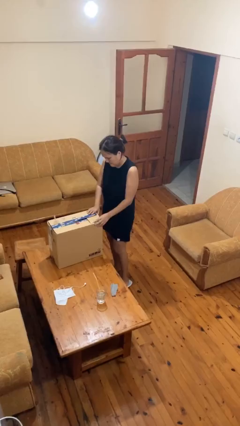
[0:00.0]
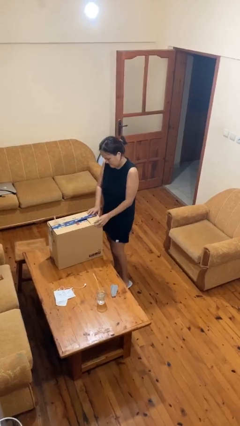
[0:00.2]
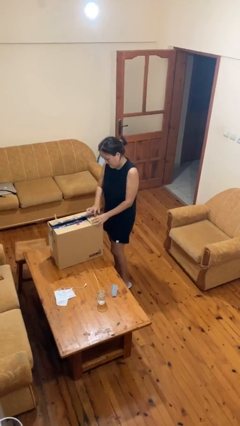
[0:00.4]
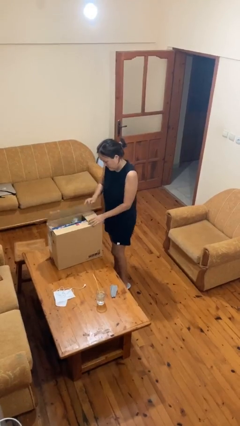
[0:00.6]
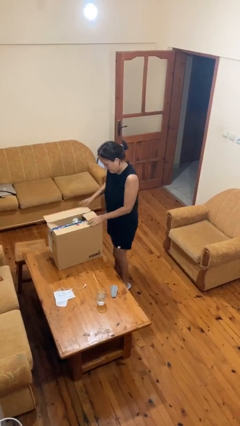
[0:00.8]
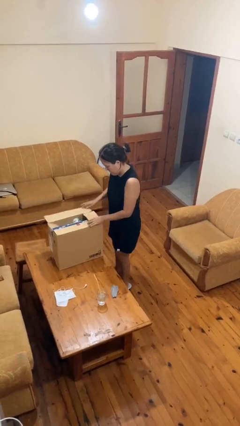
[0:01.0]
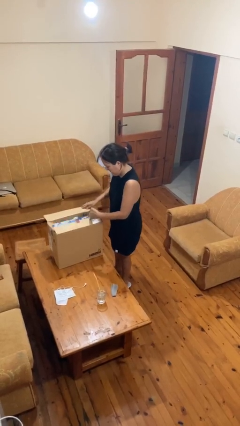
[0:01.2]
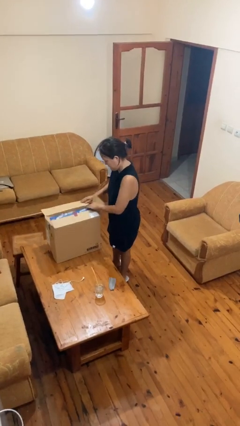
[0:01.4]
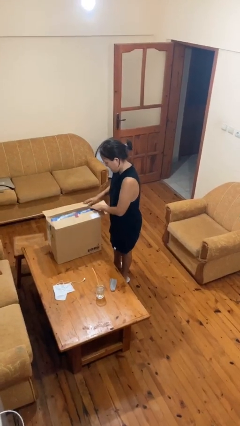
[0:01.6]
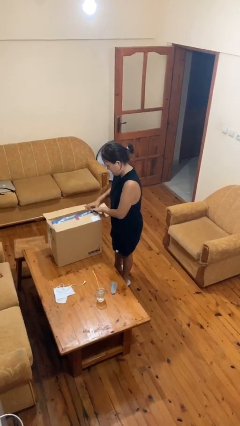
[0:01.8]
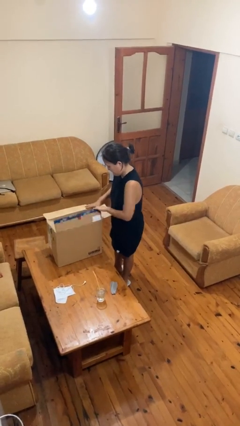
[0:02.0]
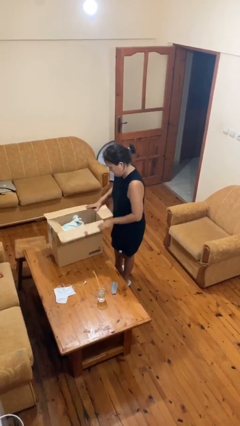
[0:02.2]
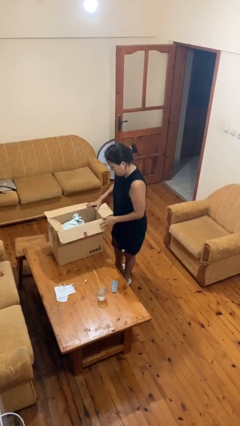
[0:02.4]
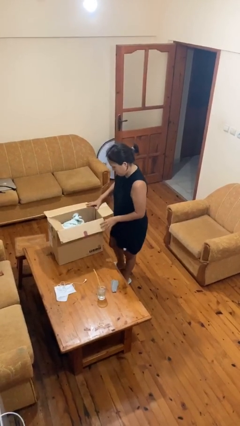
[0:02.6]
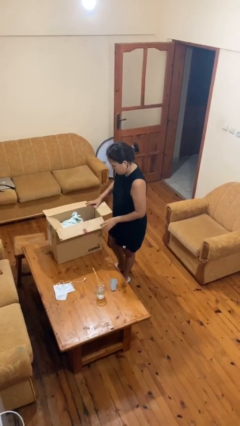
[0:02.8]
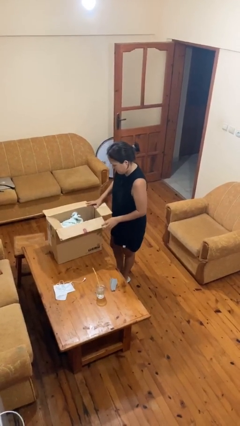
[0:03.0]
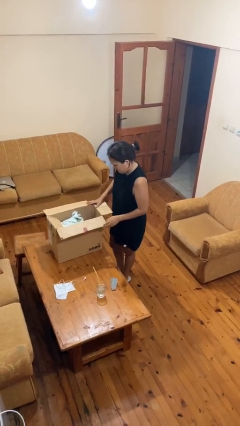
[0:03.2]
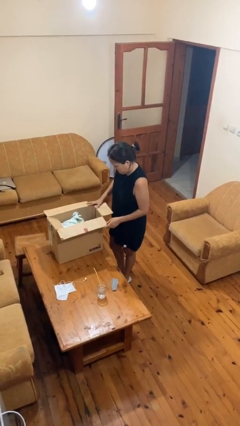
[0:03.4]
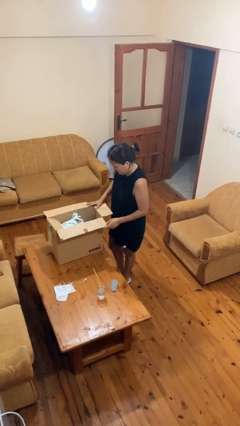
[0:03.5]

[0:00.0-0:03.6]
person opens box

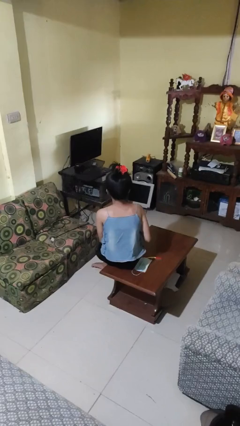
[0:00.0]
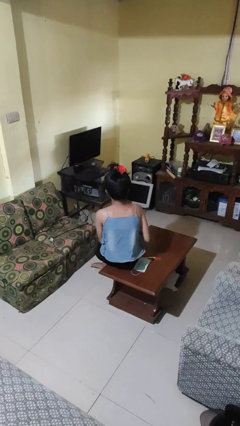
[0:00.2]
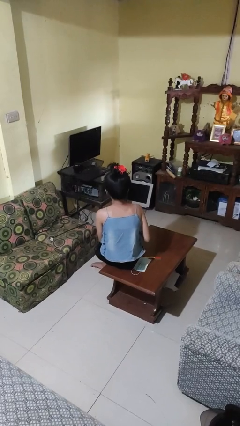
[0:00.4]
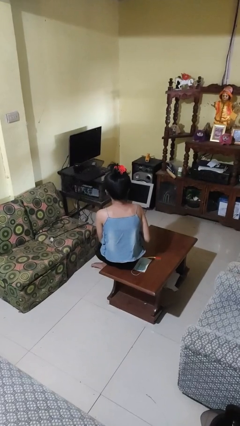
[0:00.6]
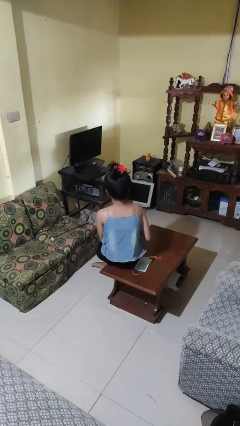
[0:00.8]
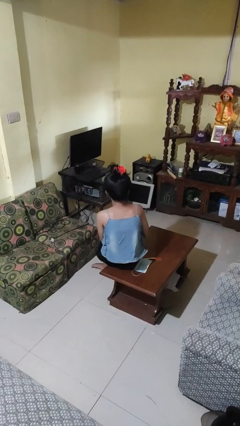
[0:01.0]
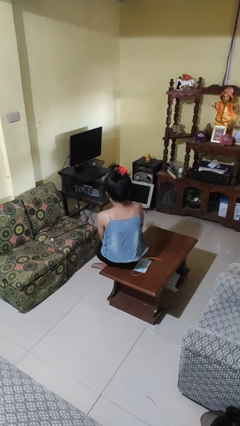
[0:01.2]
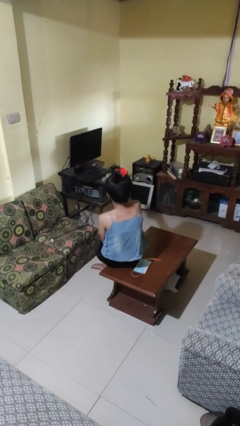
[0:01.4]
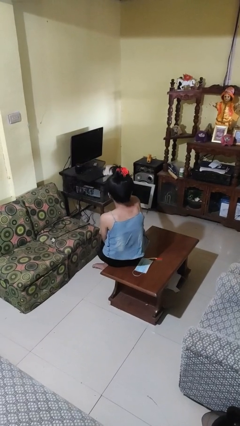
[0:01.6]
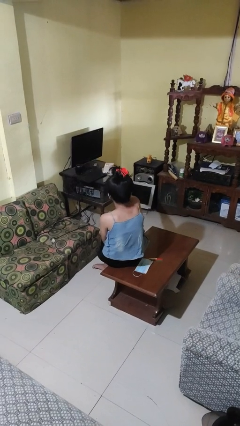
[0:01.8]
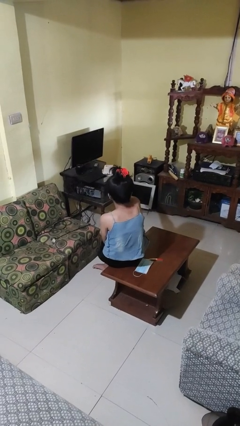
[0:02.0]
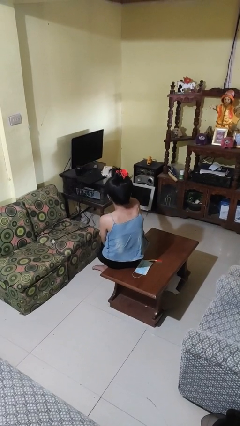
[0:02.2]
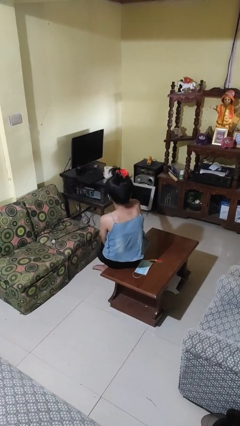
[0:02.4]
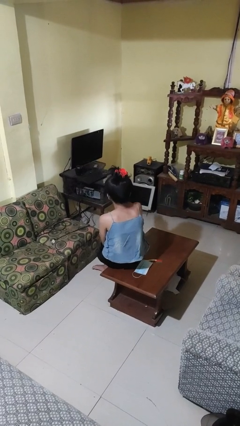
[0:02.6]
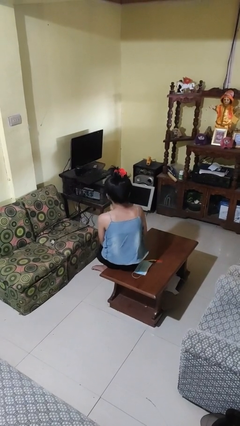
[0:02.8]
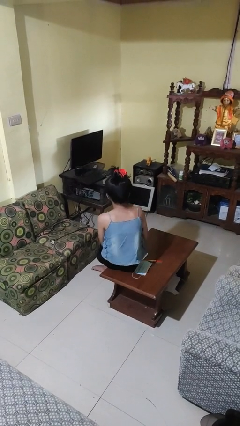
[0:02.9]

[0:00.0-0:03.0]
person uses television remote

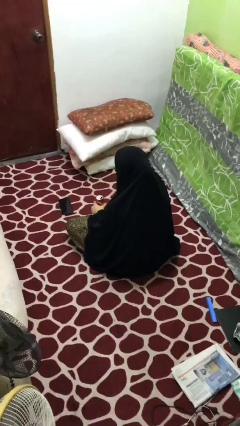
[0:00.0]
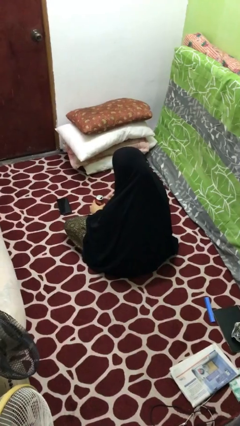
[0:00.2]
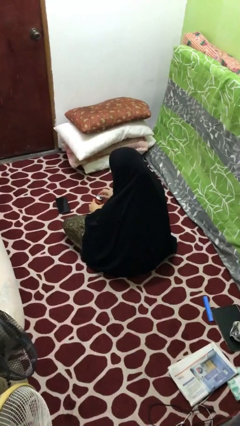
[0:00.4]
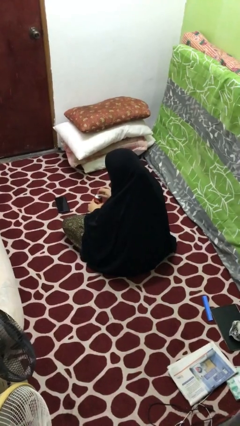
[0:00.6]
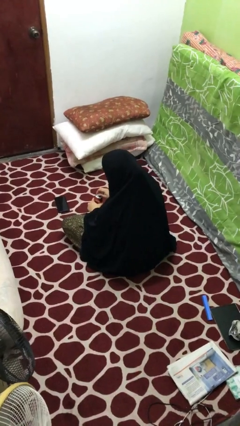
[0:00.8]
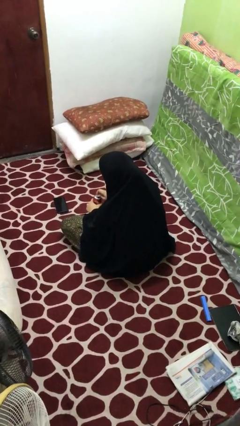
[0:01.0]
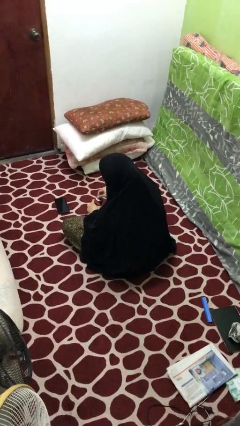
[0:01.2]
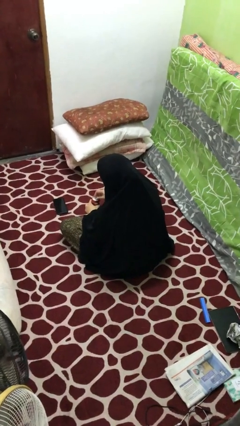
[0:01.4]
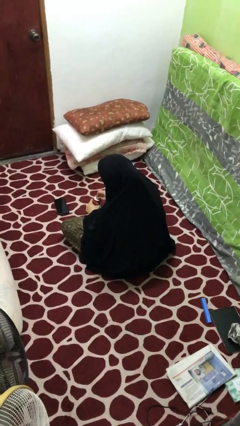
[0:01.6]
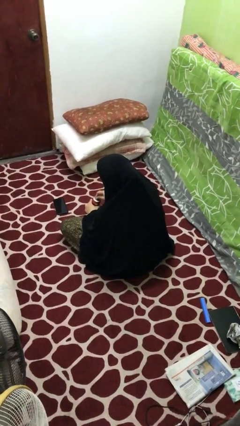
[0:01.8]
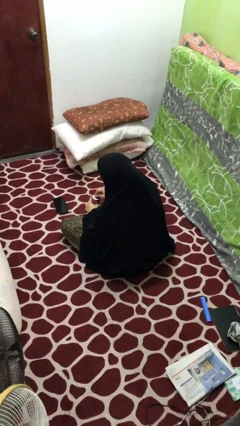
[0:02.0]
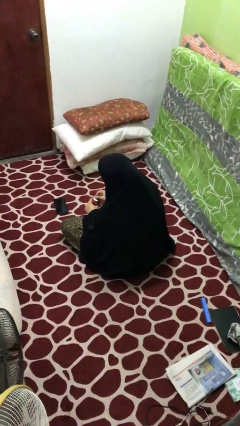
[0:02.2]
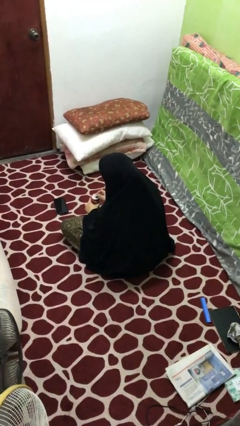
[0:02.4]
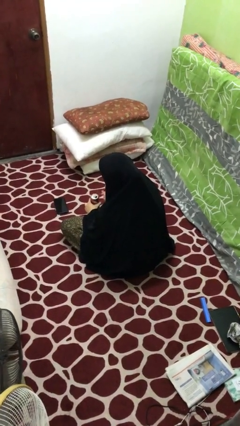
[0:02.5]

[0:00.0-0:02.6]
person opens beverage can

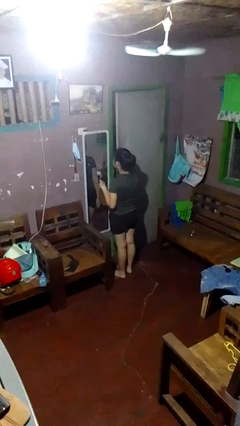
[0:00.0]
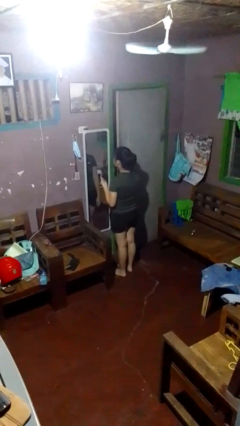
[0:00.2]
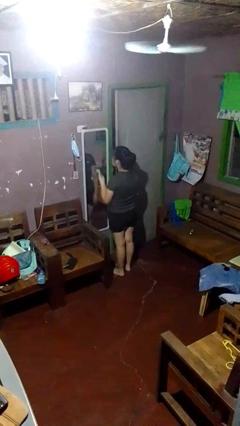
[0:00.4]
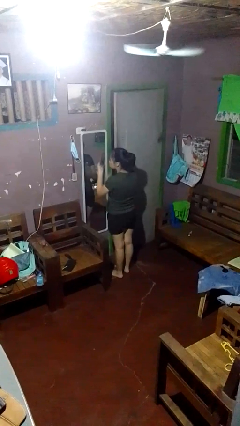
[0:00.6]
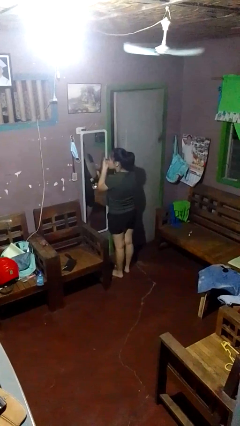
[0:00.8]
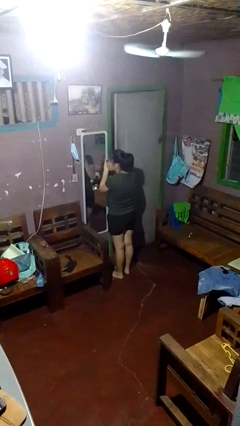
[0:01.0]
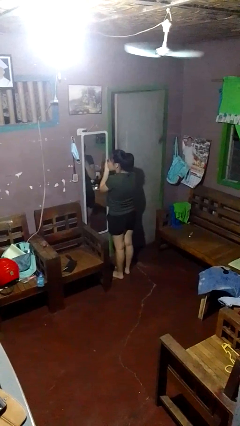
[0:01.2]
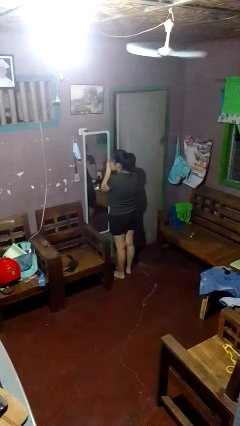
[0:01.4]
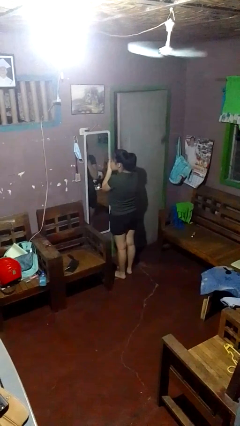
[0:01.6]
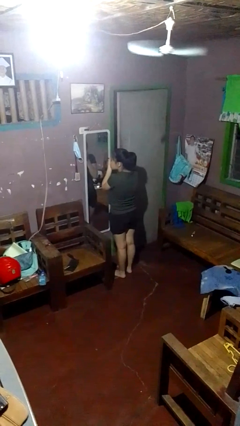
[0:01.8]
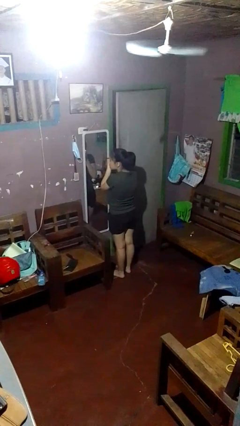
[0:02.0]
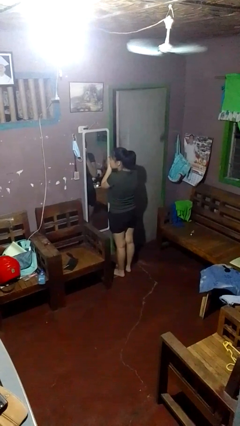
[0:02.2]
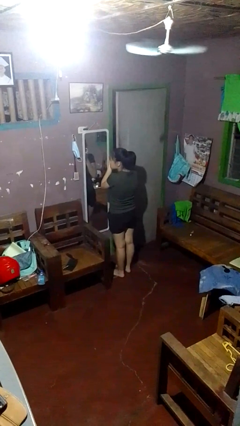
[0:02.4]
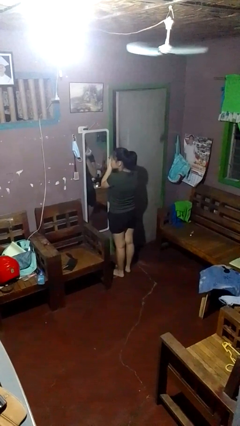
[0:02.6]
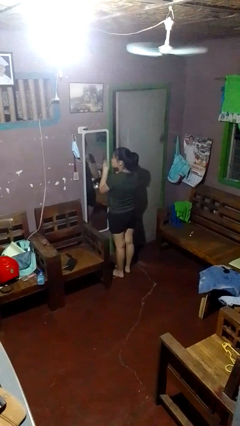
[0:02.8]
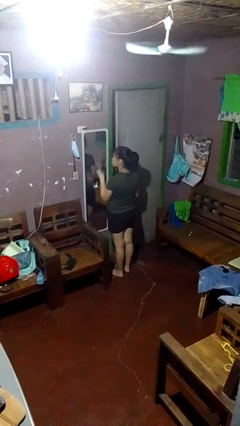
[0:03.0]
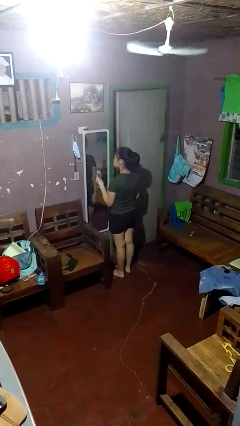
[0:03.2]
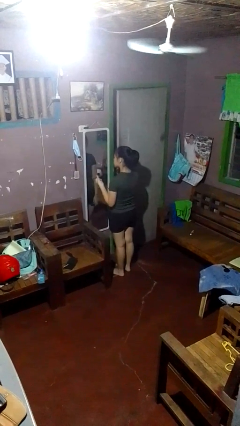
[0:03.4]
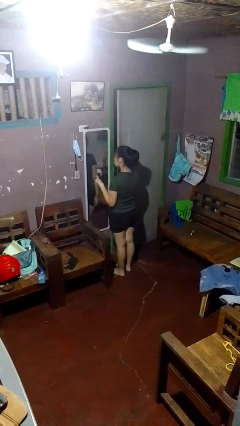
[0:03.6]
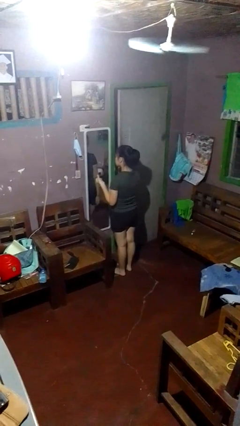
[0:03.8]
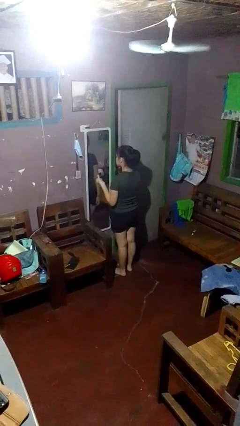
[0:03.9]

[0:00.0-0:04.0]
person applies eye makeup

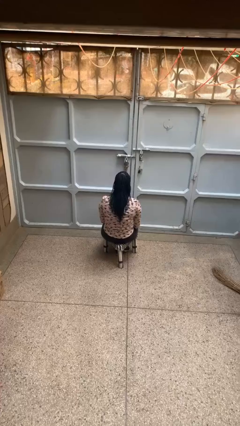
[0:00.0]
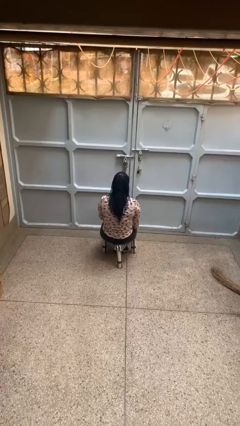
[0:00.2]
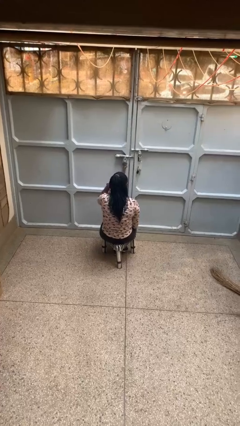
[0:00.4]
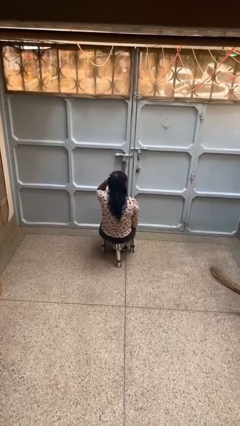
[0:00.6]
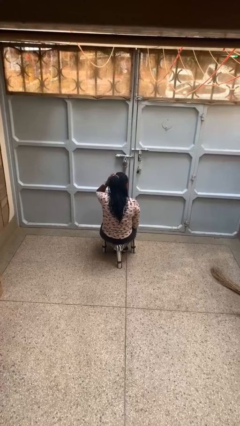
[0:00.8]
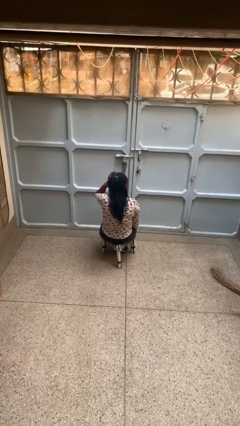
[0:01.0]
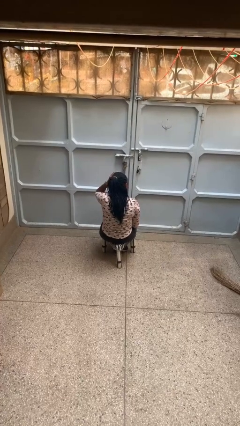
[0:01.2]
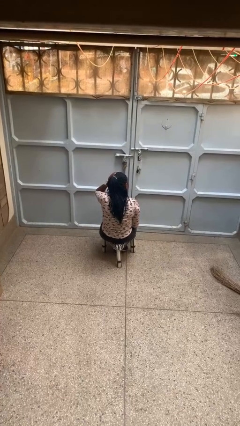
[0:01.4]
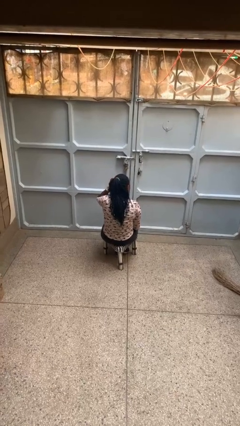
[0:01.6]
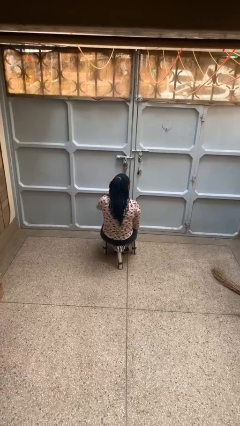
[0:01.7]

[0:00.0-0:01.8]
person strokes hair

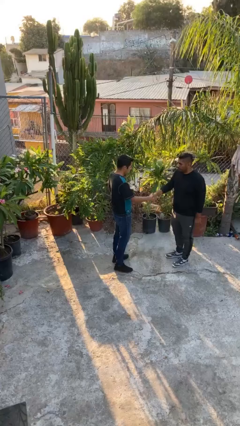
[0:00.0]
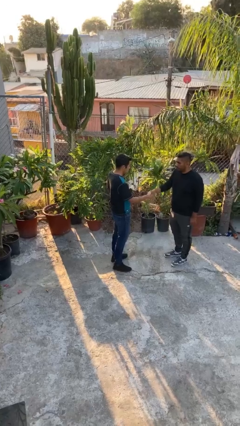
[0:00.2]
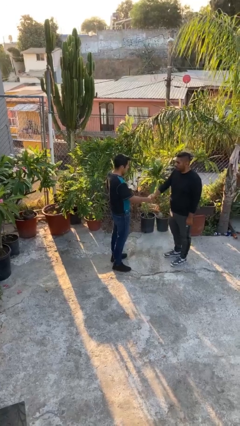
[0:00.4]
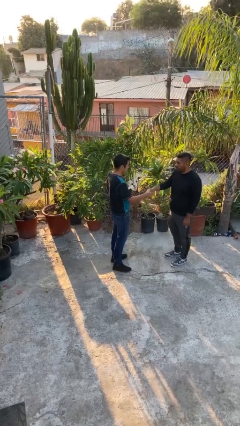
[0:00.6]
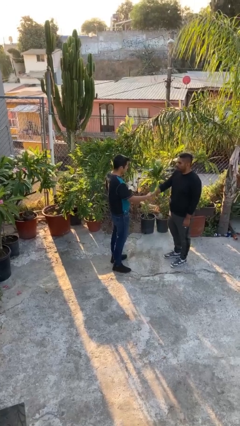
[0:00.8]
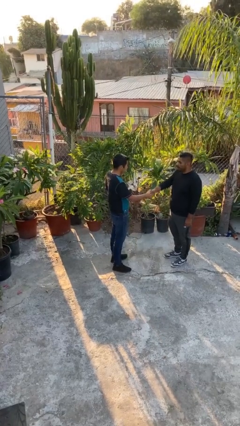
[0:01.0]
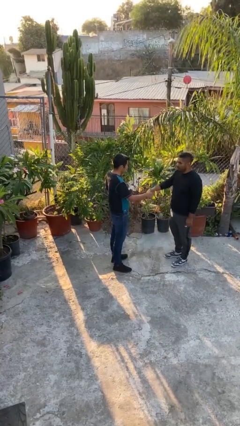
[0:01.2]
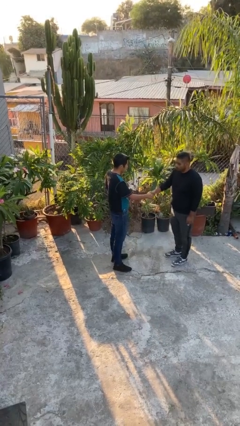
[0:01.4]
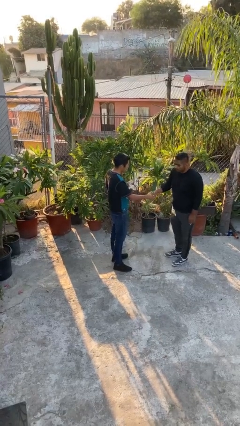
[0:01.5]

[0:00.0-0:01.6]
person shakes hand

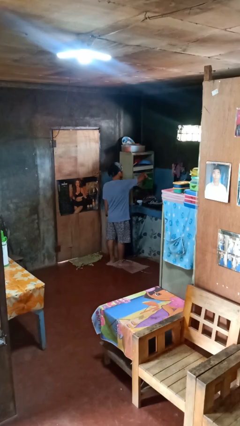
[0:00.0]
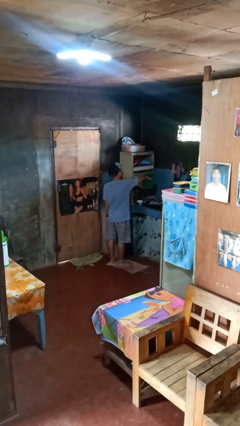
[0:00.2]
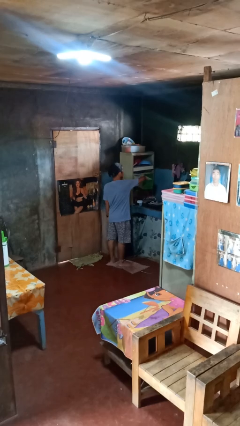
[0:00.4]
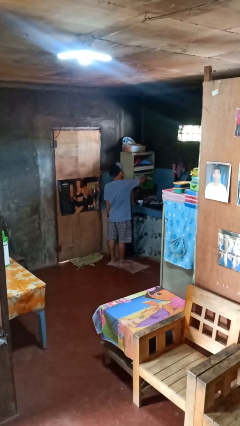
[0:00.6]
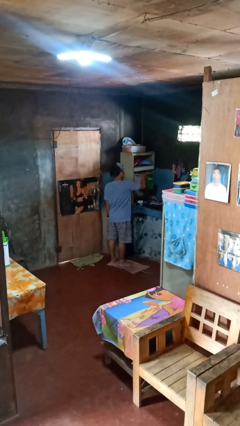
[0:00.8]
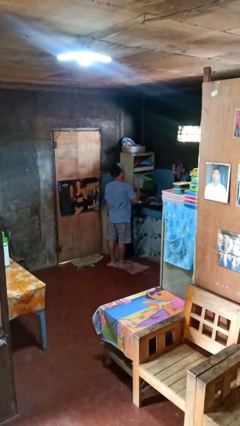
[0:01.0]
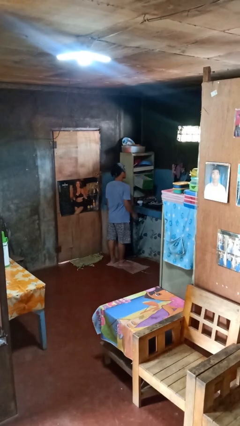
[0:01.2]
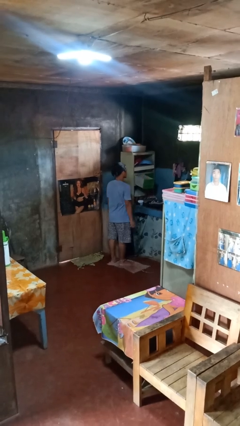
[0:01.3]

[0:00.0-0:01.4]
person puts object into kitchen drawer
